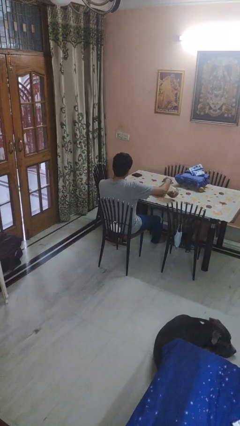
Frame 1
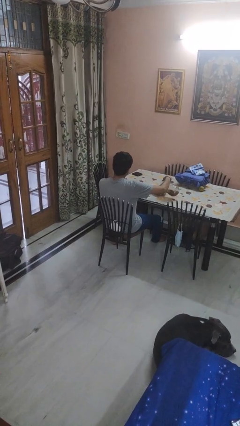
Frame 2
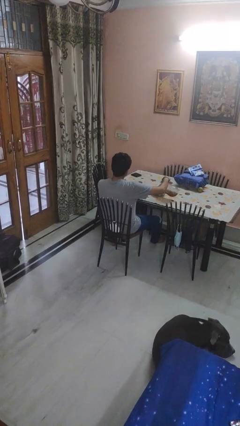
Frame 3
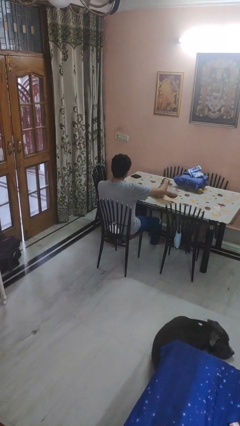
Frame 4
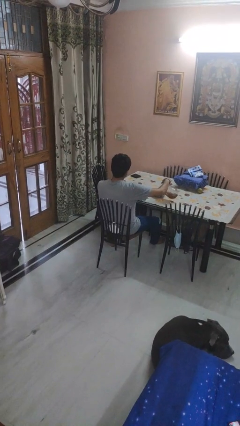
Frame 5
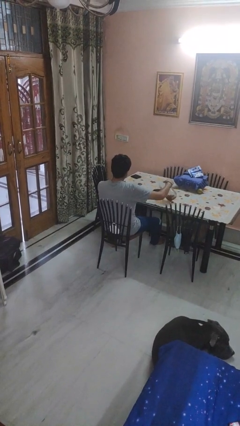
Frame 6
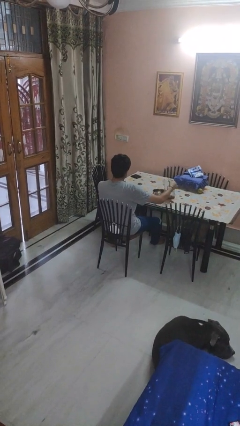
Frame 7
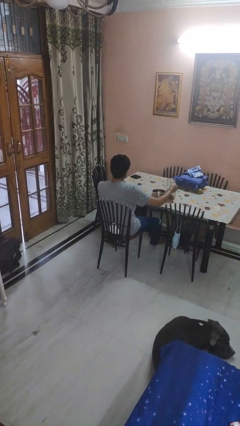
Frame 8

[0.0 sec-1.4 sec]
person pours into bowl

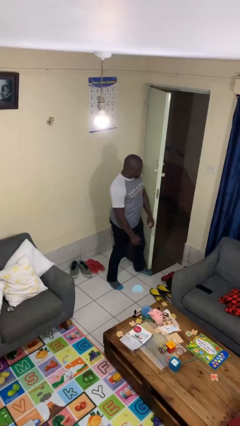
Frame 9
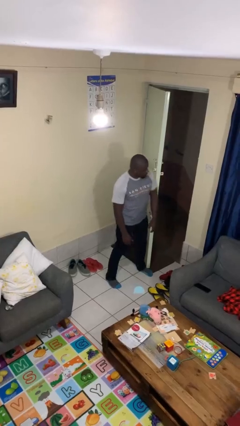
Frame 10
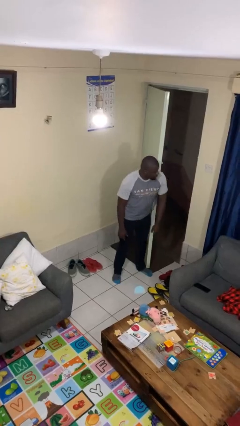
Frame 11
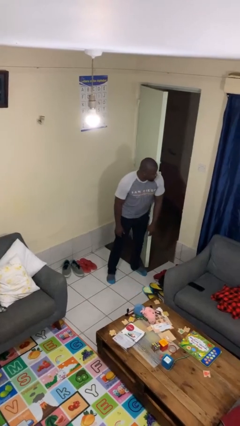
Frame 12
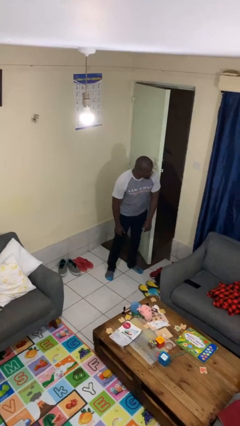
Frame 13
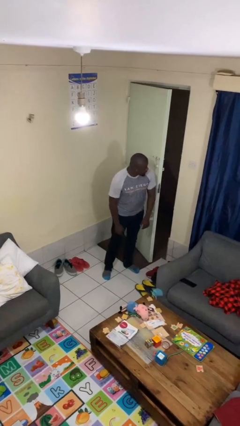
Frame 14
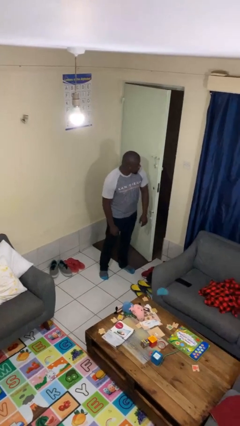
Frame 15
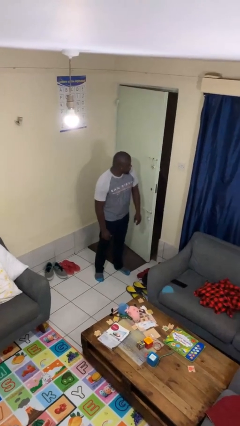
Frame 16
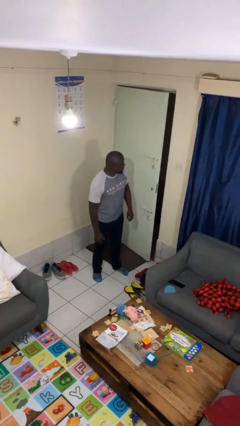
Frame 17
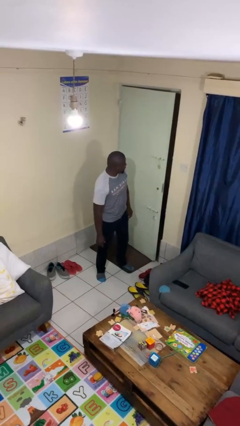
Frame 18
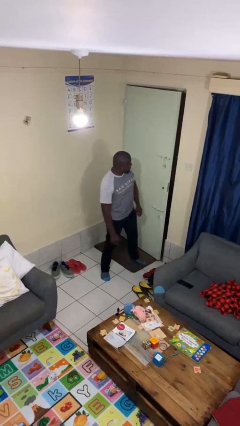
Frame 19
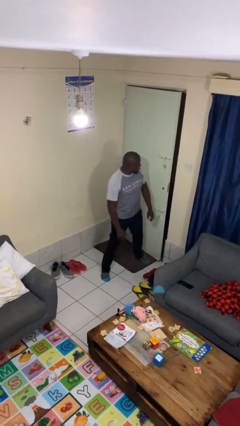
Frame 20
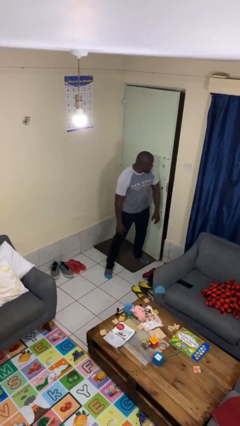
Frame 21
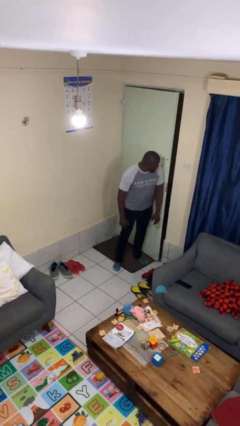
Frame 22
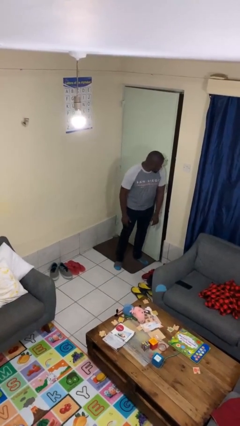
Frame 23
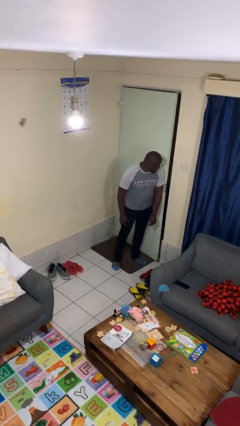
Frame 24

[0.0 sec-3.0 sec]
person closes door with hip

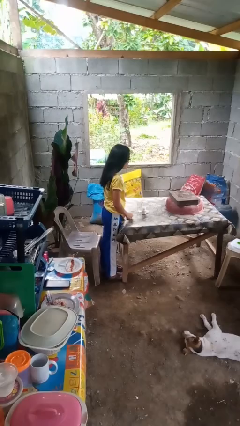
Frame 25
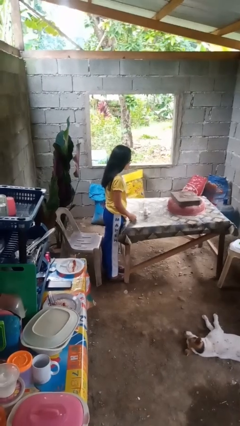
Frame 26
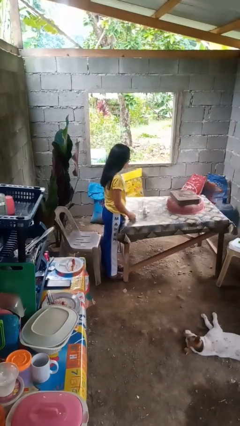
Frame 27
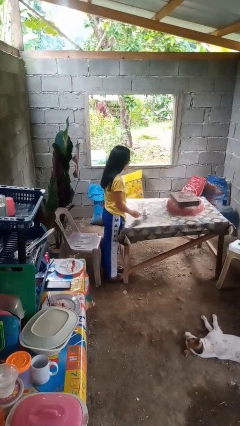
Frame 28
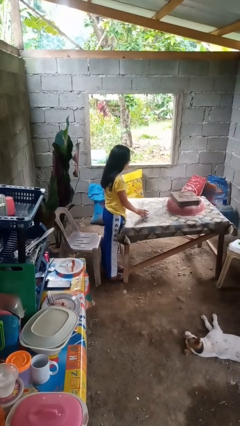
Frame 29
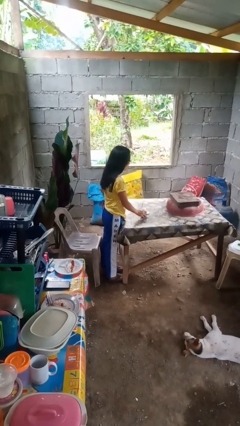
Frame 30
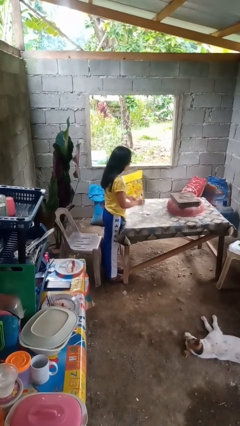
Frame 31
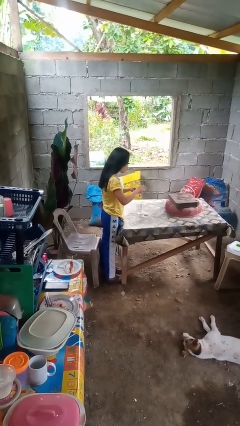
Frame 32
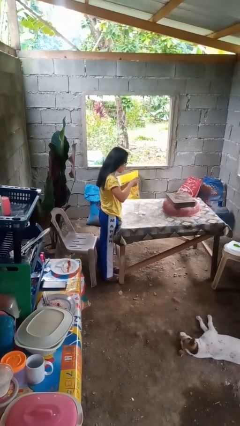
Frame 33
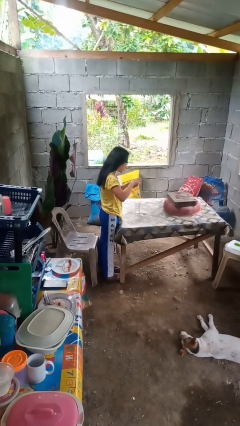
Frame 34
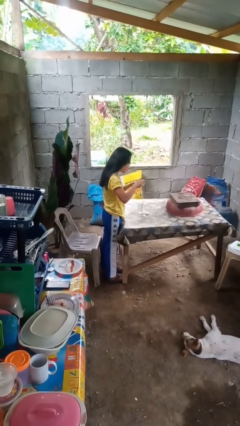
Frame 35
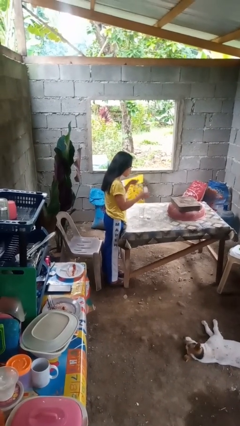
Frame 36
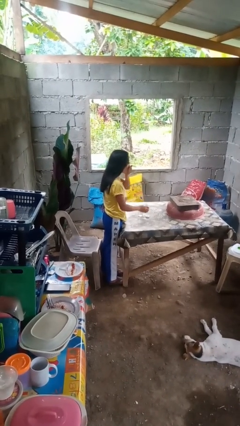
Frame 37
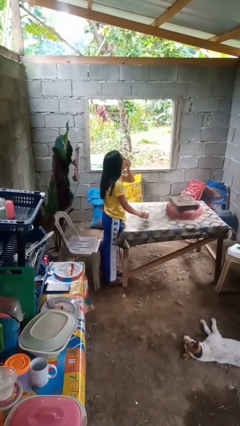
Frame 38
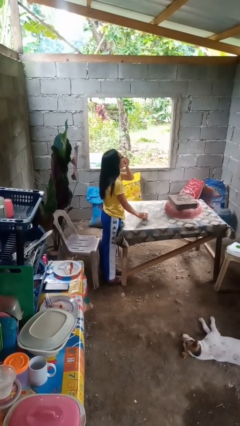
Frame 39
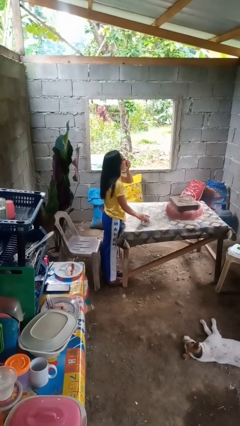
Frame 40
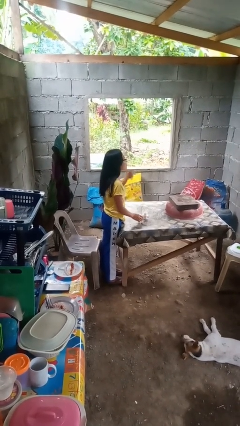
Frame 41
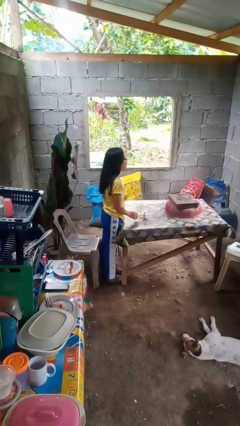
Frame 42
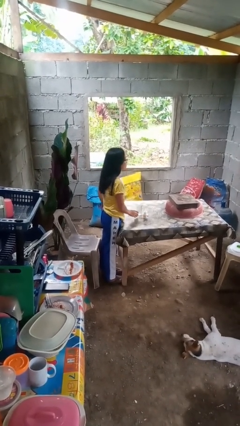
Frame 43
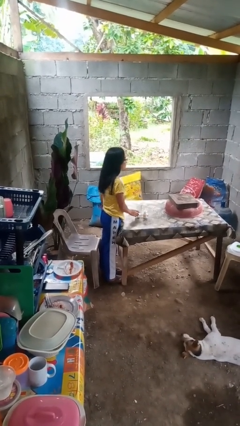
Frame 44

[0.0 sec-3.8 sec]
person takes medicine pills

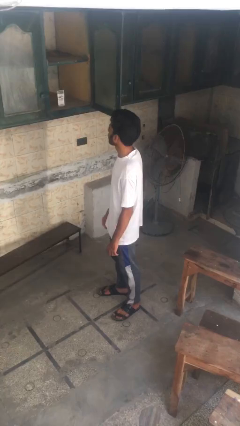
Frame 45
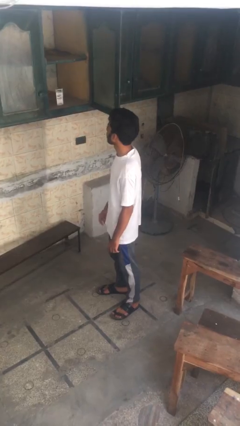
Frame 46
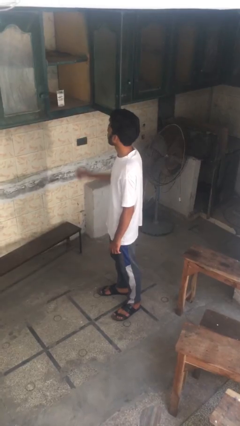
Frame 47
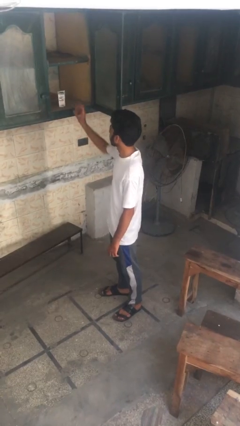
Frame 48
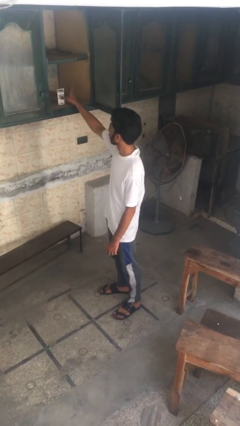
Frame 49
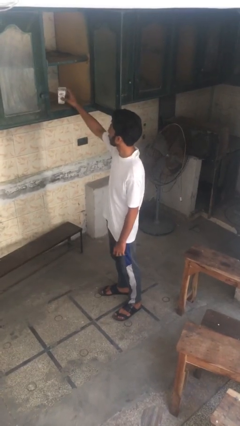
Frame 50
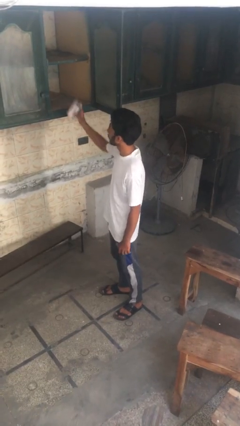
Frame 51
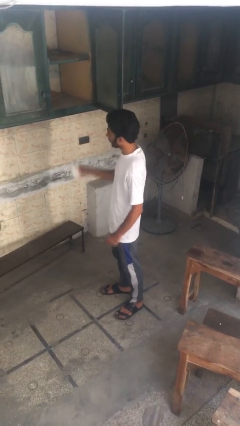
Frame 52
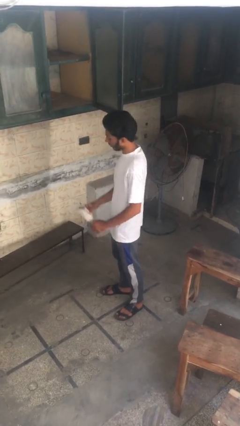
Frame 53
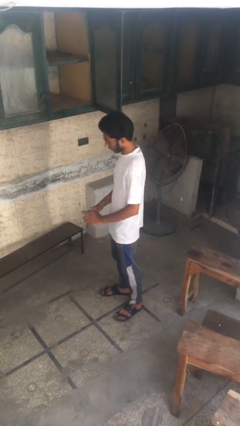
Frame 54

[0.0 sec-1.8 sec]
person takes object from cabinet

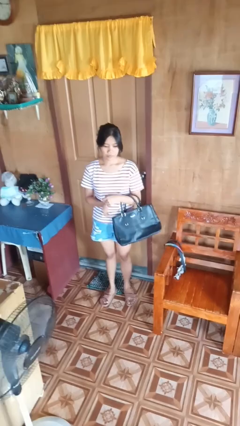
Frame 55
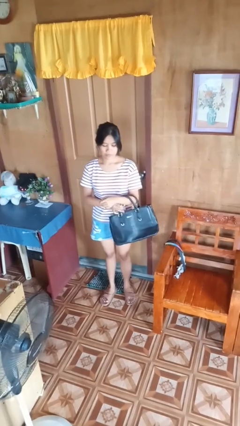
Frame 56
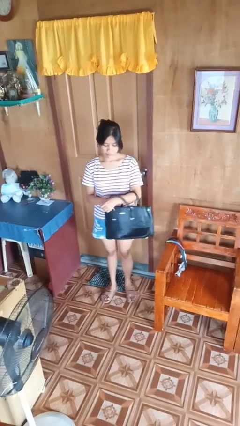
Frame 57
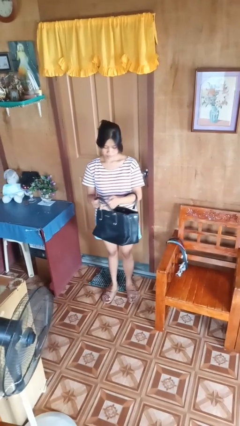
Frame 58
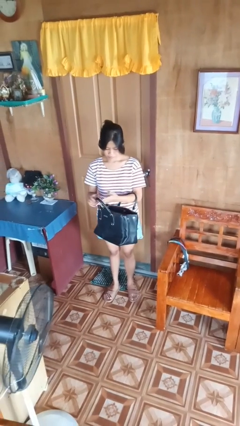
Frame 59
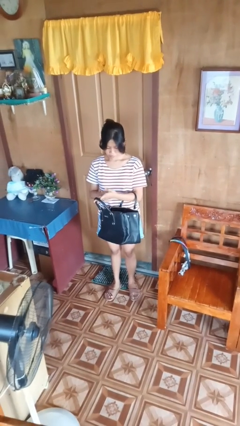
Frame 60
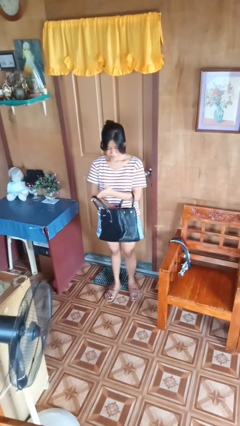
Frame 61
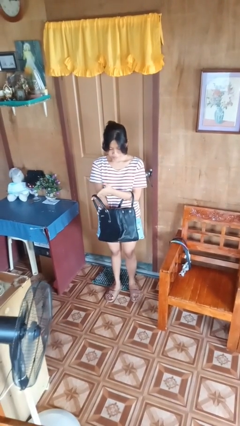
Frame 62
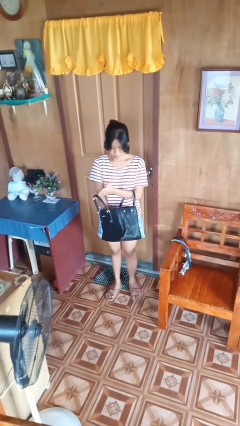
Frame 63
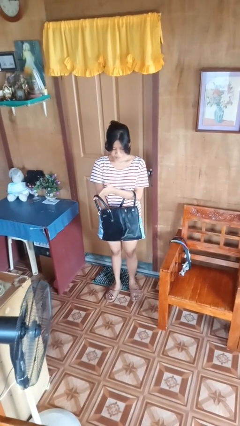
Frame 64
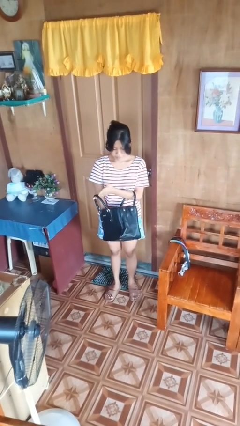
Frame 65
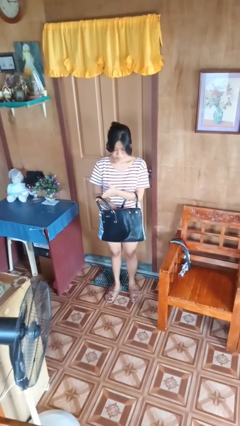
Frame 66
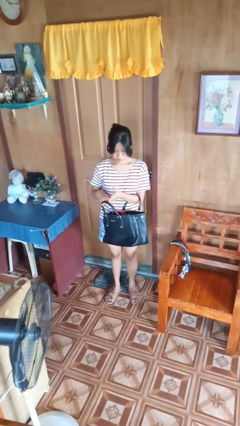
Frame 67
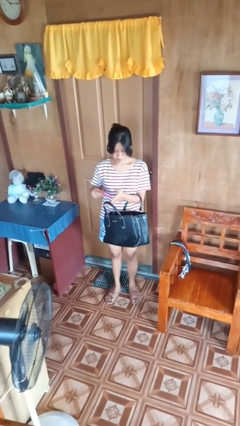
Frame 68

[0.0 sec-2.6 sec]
person searches in purse

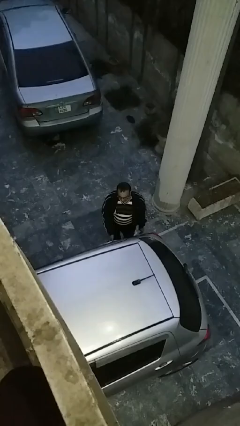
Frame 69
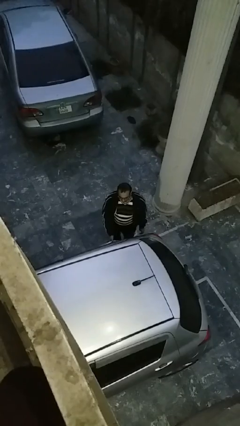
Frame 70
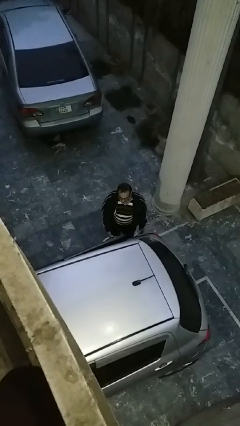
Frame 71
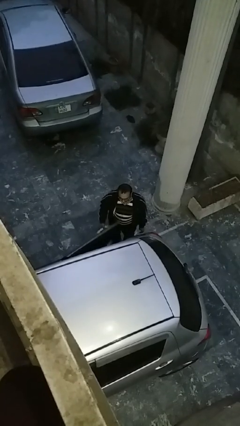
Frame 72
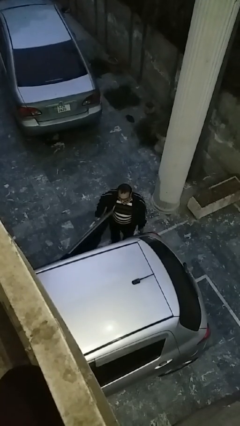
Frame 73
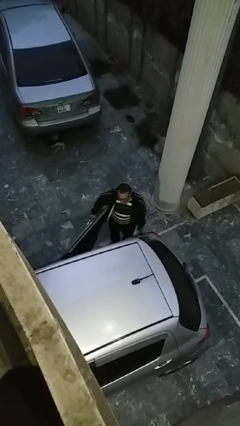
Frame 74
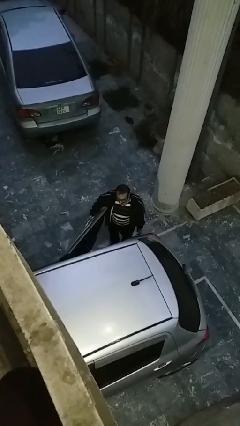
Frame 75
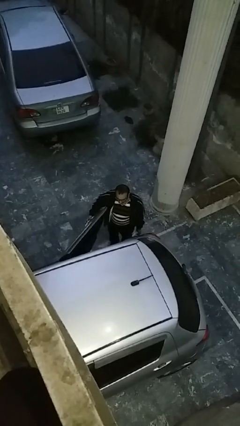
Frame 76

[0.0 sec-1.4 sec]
person opens car door

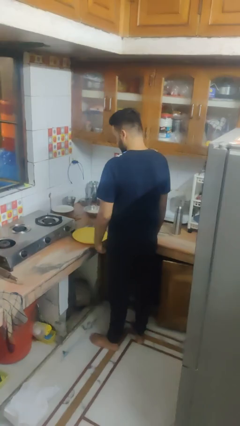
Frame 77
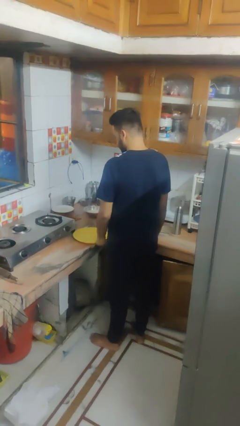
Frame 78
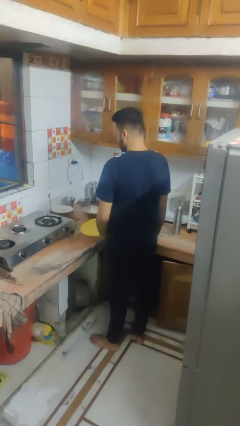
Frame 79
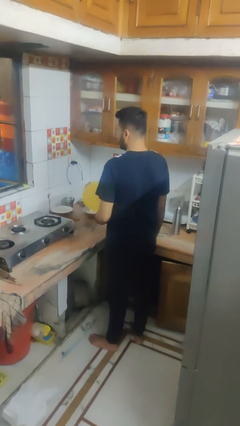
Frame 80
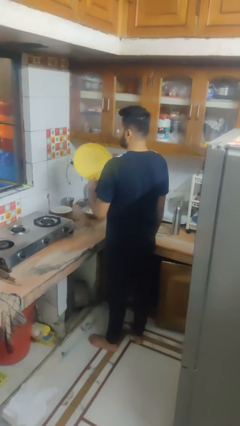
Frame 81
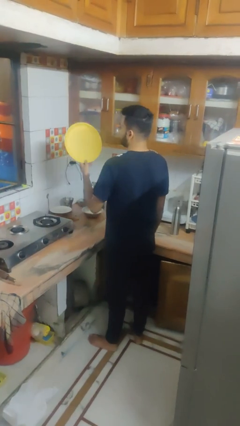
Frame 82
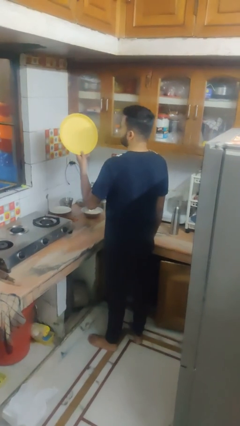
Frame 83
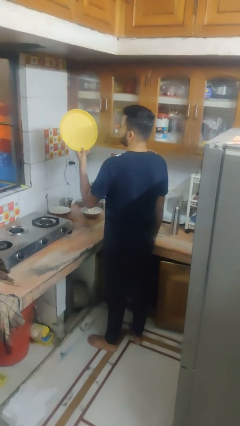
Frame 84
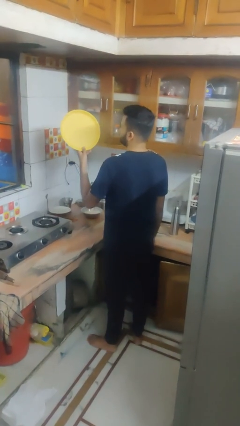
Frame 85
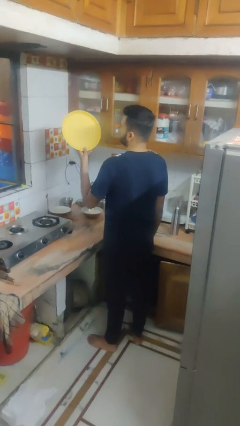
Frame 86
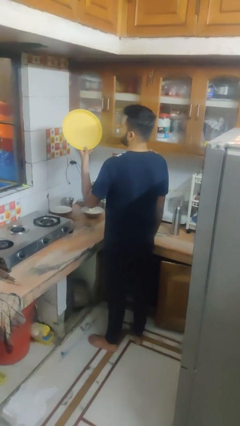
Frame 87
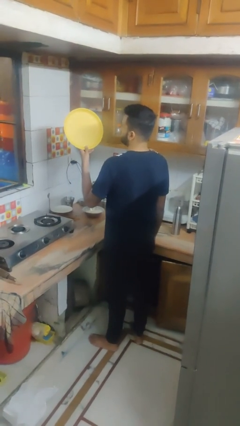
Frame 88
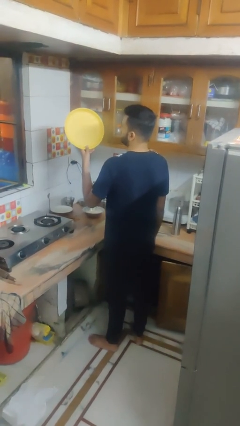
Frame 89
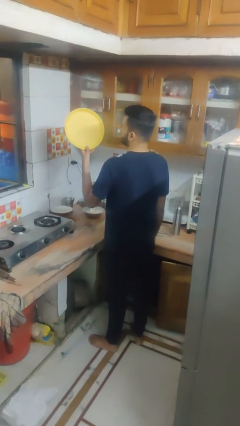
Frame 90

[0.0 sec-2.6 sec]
person picks up object from countertop
